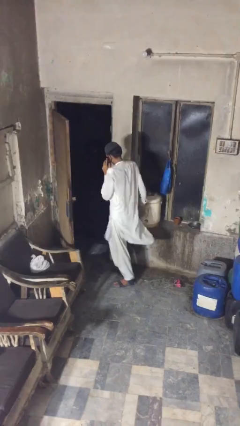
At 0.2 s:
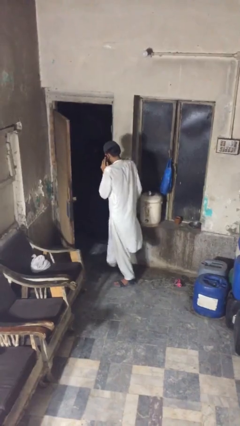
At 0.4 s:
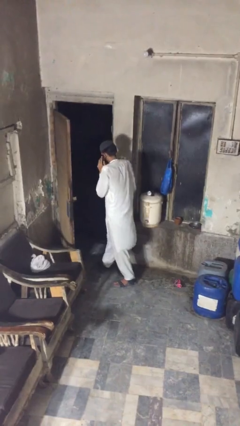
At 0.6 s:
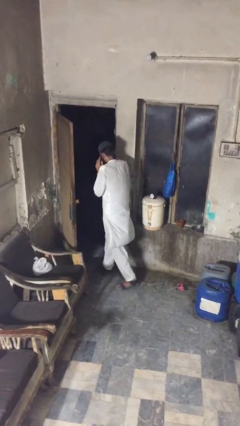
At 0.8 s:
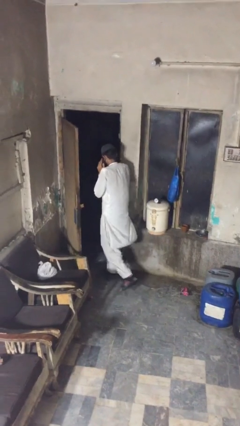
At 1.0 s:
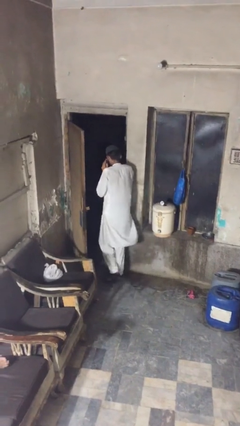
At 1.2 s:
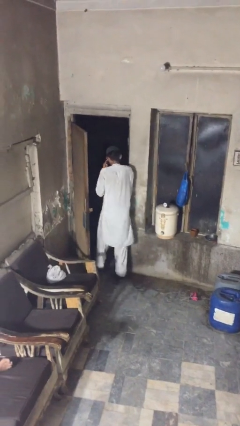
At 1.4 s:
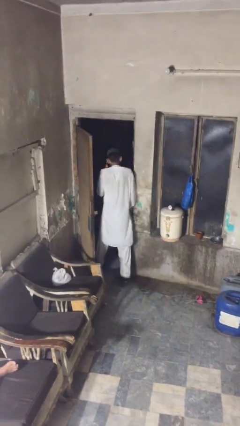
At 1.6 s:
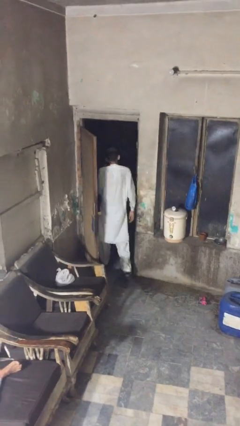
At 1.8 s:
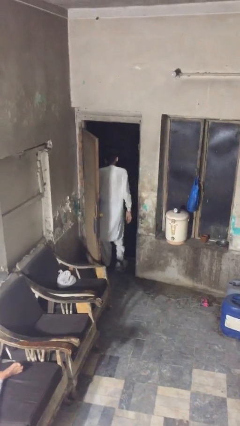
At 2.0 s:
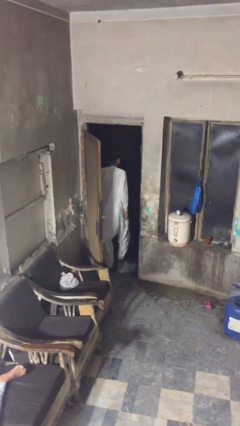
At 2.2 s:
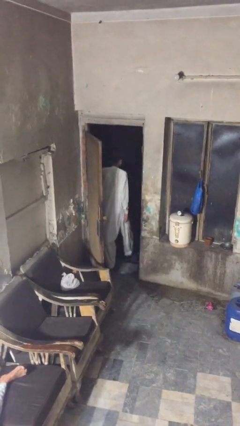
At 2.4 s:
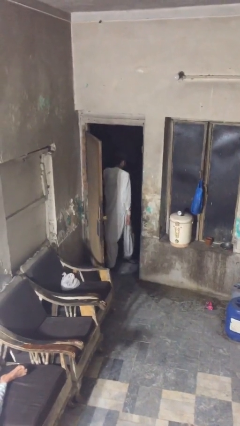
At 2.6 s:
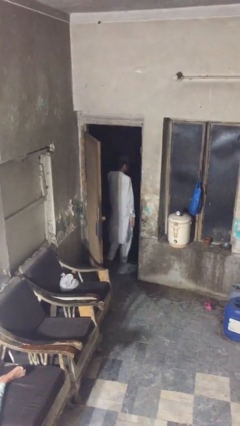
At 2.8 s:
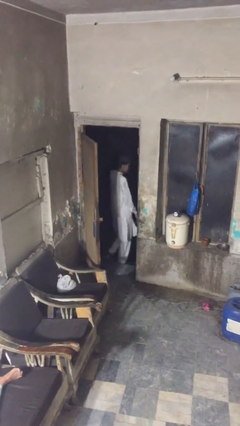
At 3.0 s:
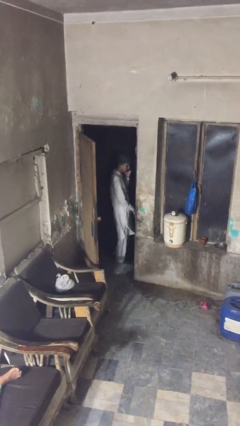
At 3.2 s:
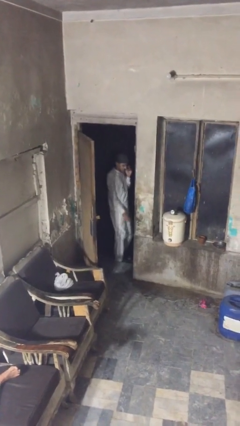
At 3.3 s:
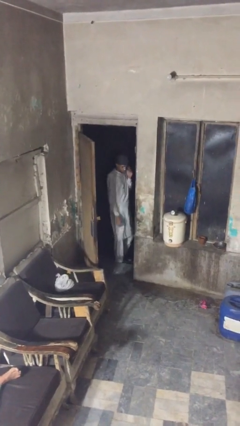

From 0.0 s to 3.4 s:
person exits scene through structure

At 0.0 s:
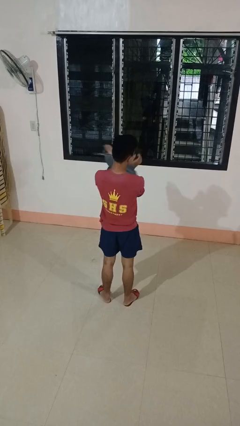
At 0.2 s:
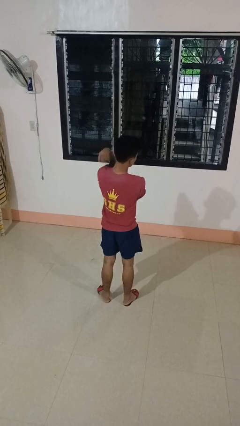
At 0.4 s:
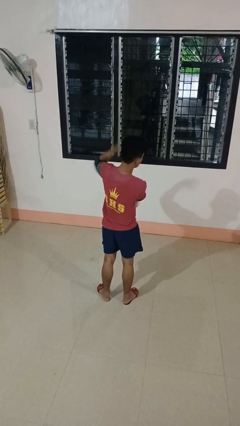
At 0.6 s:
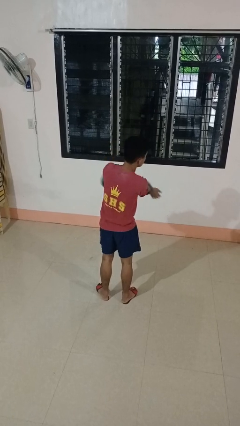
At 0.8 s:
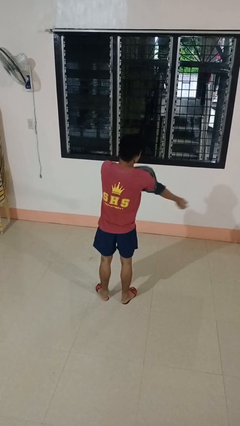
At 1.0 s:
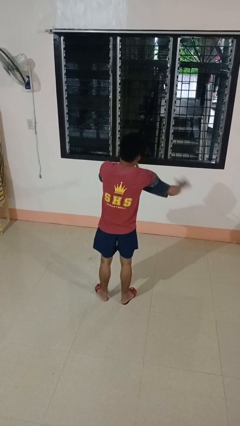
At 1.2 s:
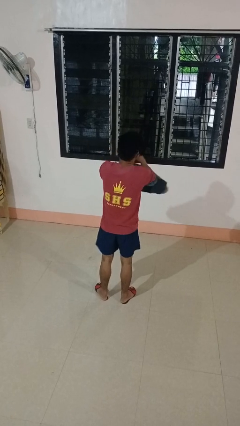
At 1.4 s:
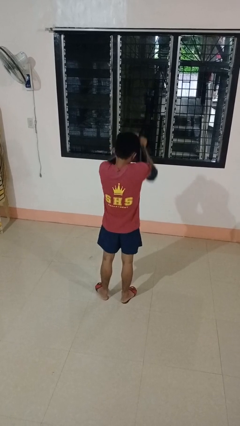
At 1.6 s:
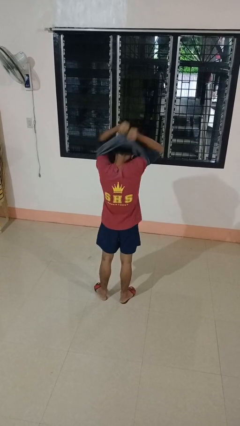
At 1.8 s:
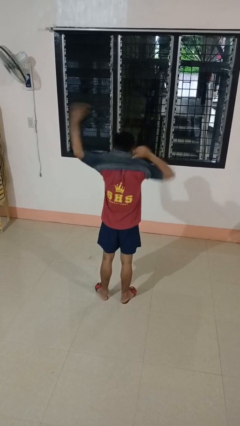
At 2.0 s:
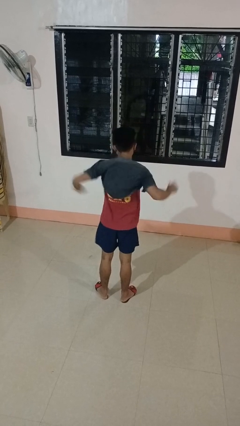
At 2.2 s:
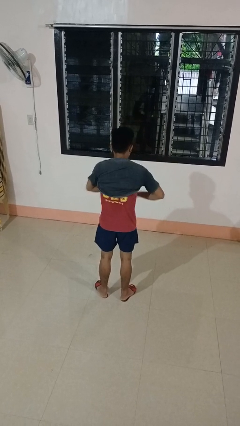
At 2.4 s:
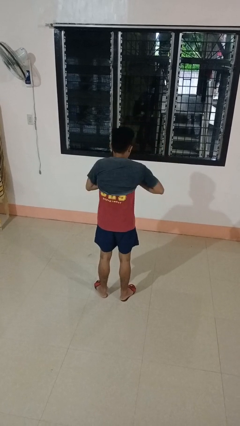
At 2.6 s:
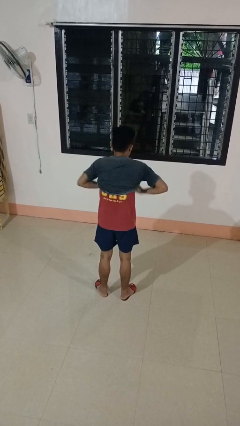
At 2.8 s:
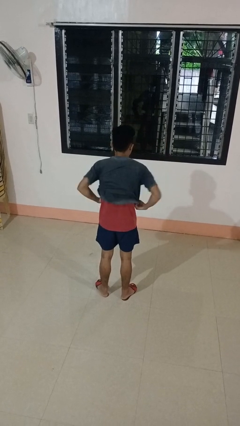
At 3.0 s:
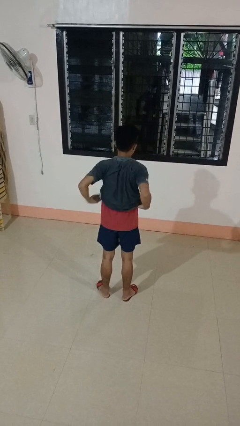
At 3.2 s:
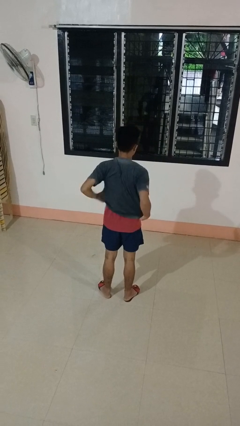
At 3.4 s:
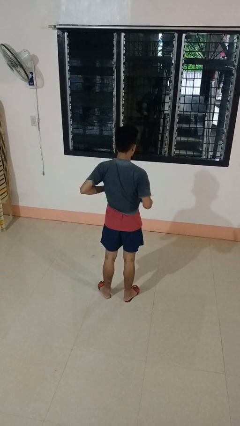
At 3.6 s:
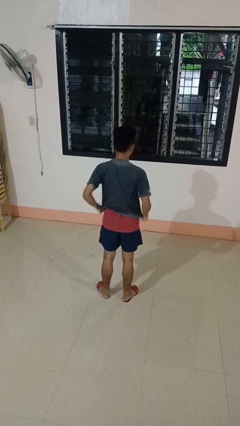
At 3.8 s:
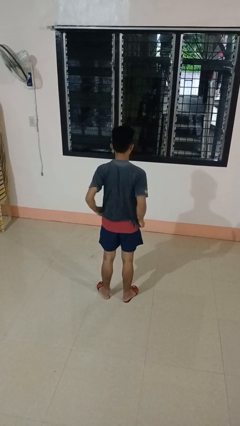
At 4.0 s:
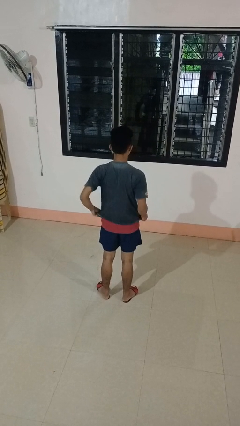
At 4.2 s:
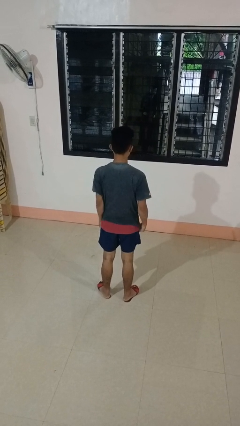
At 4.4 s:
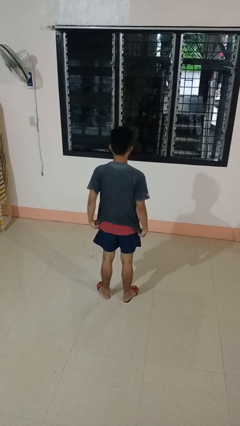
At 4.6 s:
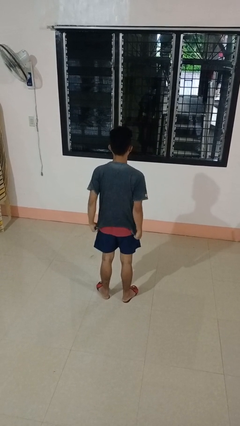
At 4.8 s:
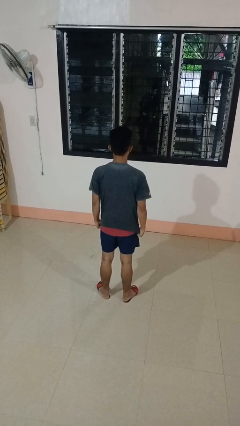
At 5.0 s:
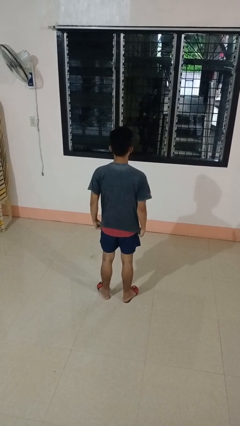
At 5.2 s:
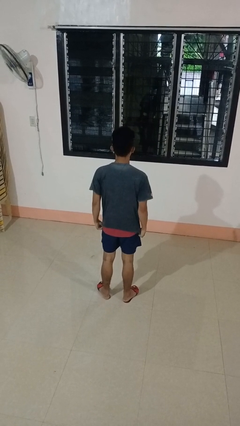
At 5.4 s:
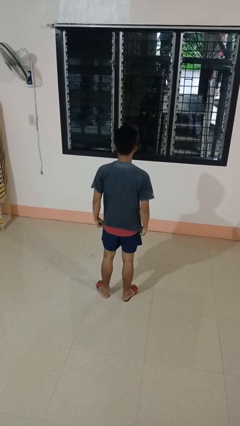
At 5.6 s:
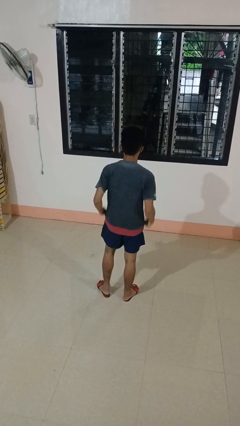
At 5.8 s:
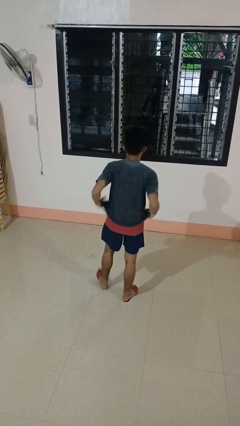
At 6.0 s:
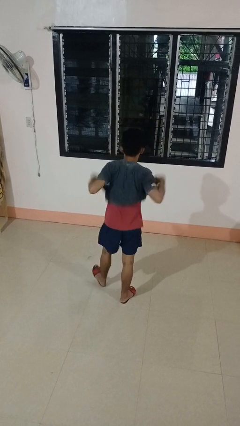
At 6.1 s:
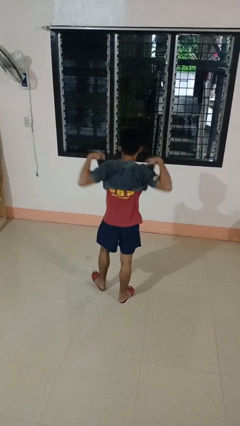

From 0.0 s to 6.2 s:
person puts on shirt

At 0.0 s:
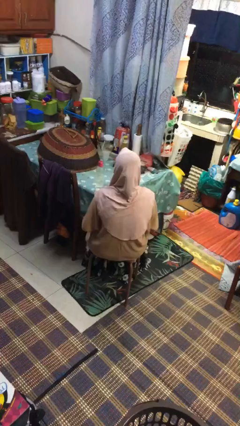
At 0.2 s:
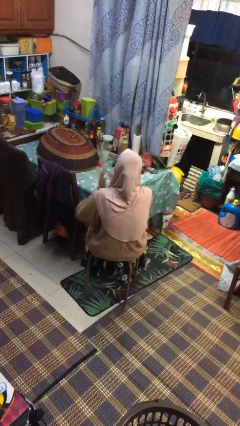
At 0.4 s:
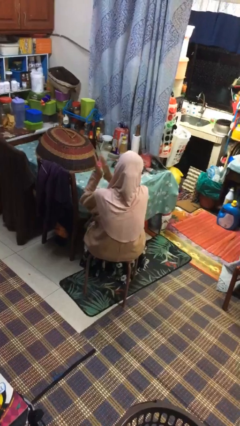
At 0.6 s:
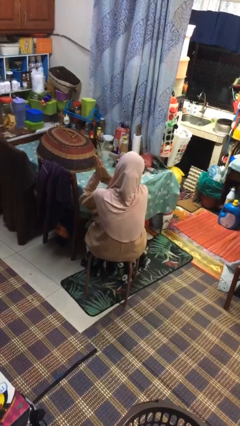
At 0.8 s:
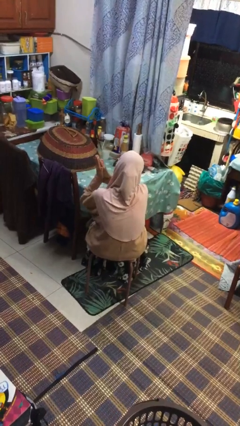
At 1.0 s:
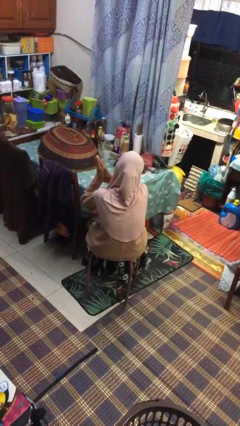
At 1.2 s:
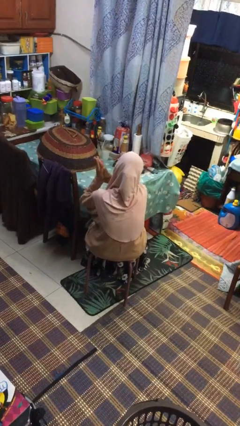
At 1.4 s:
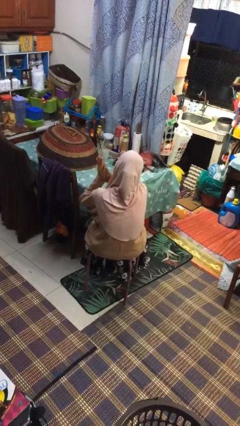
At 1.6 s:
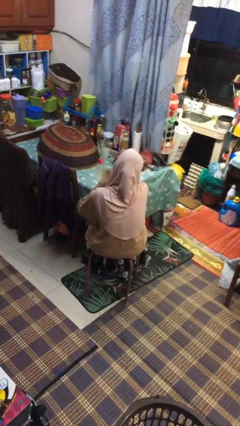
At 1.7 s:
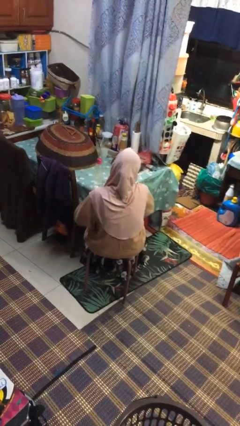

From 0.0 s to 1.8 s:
person claps hands

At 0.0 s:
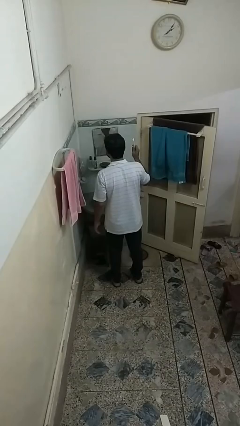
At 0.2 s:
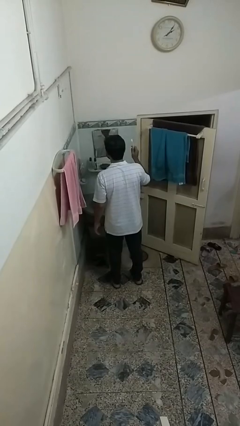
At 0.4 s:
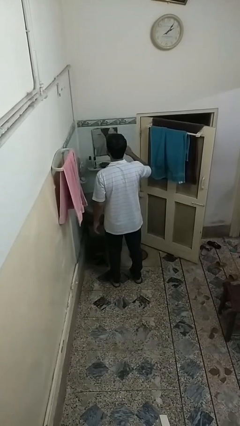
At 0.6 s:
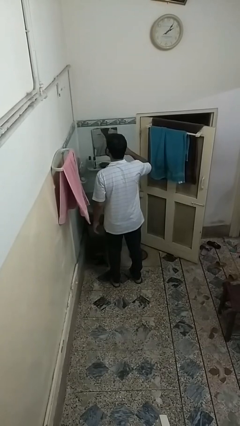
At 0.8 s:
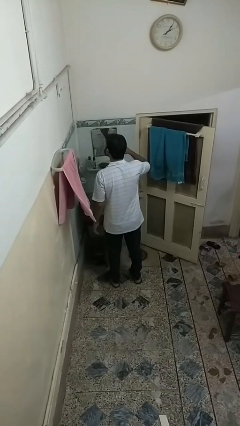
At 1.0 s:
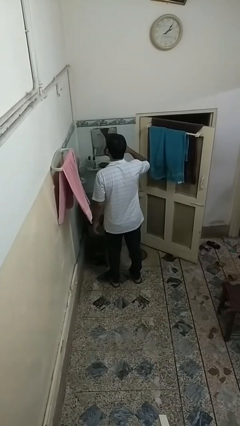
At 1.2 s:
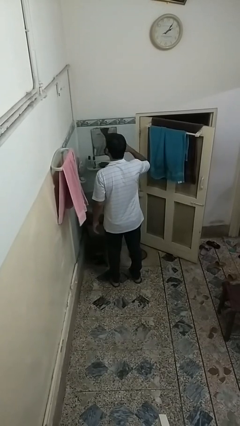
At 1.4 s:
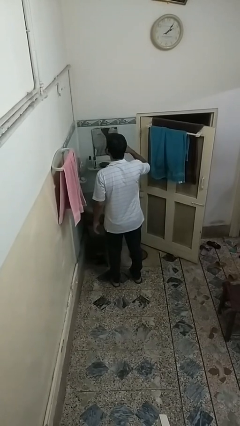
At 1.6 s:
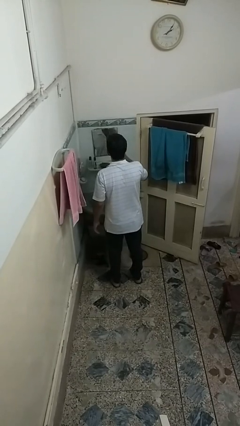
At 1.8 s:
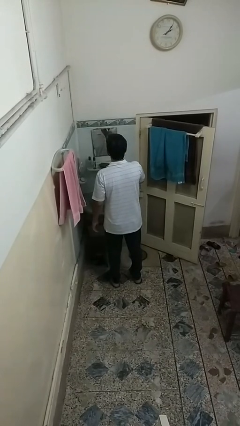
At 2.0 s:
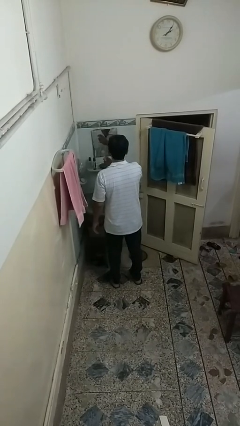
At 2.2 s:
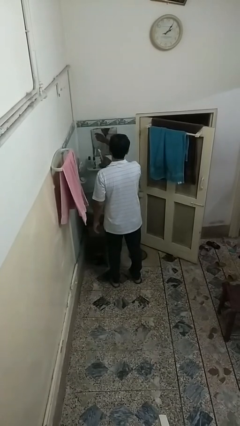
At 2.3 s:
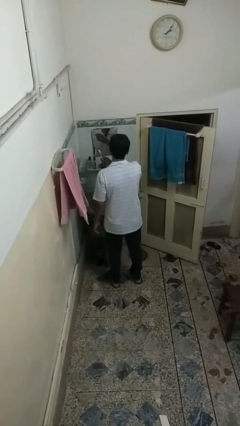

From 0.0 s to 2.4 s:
person brushes teeth

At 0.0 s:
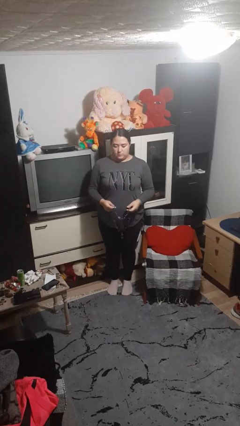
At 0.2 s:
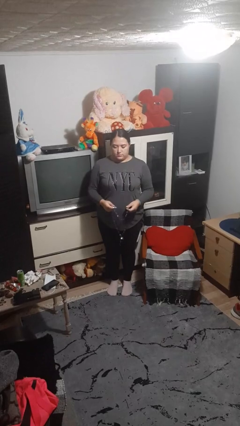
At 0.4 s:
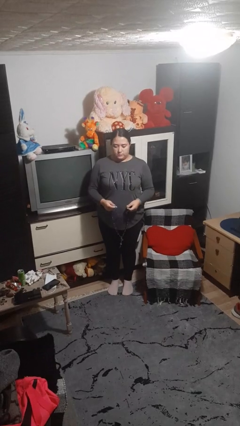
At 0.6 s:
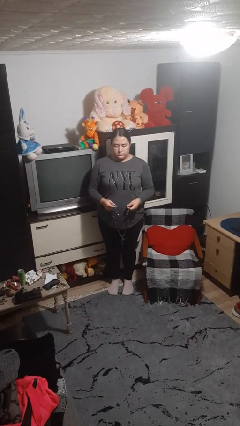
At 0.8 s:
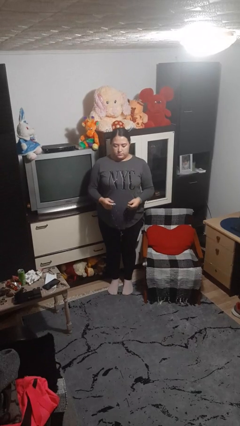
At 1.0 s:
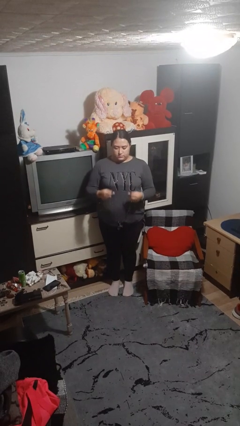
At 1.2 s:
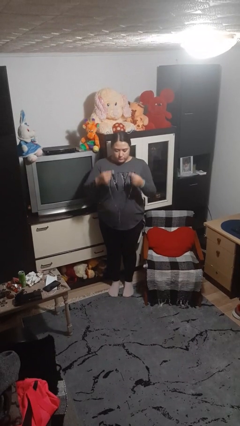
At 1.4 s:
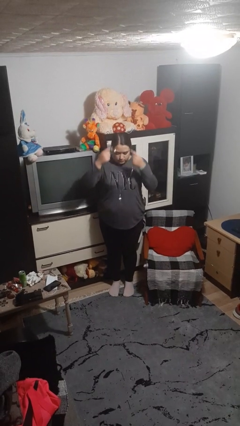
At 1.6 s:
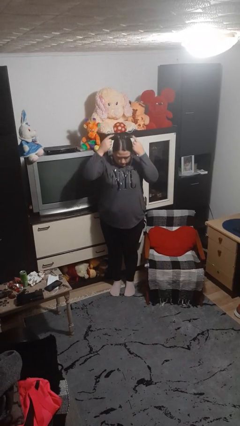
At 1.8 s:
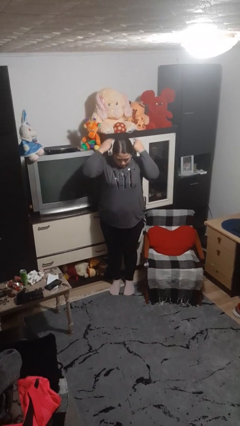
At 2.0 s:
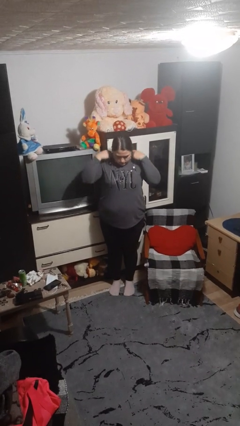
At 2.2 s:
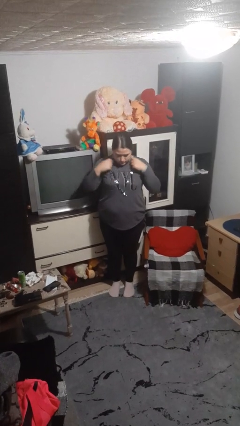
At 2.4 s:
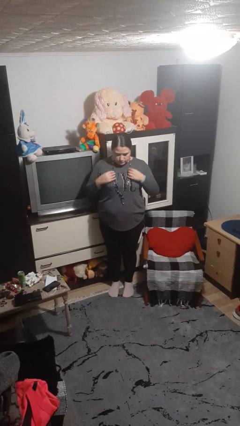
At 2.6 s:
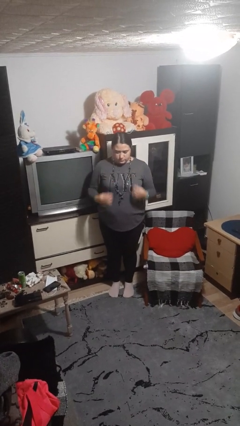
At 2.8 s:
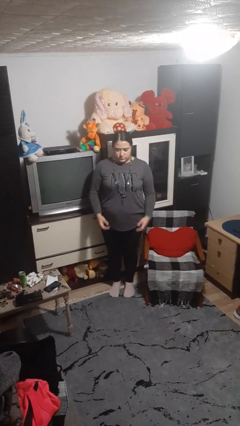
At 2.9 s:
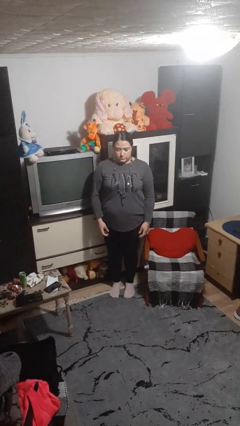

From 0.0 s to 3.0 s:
person puts on necklace

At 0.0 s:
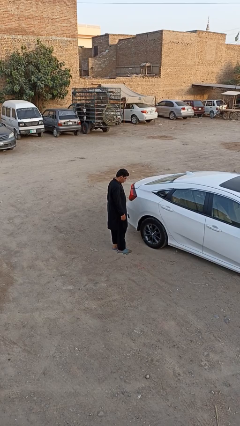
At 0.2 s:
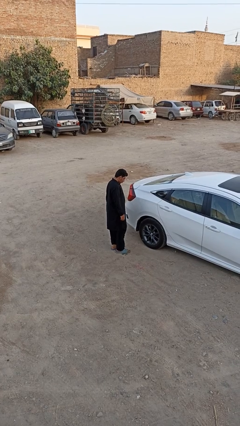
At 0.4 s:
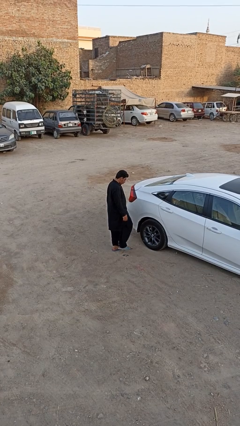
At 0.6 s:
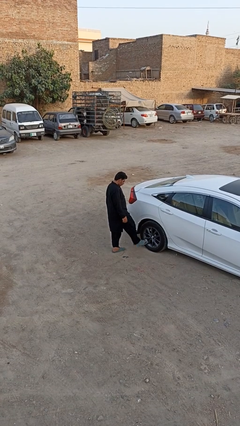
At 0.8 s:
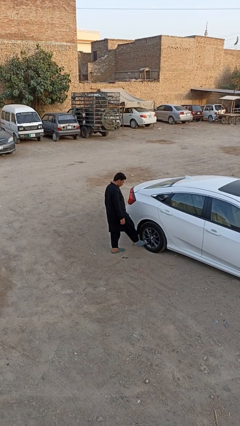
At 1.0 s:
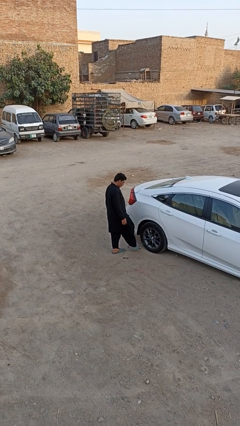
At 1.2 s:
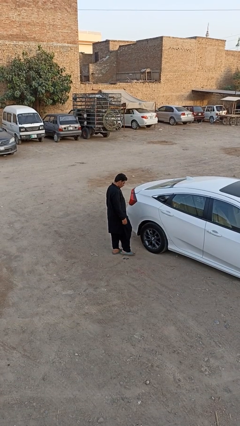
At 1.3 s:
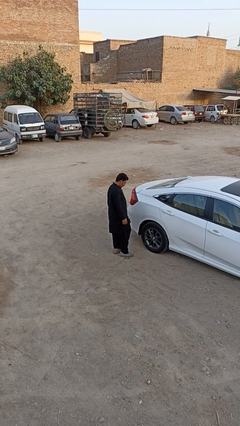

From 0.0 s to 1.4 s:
person kicks car tires
